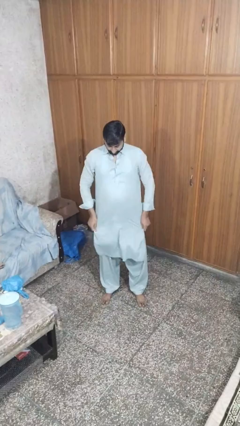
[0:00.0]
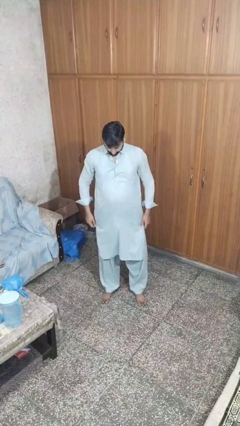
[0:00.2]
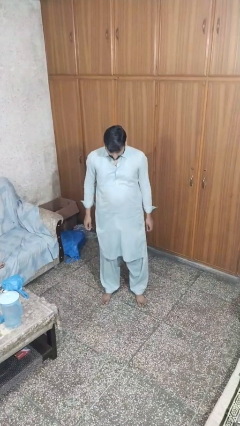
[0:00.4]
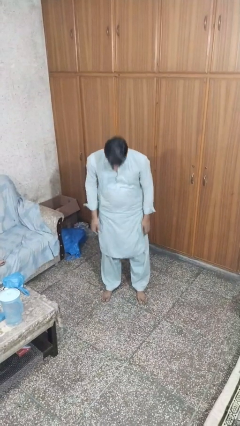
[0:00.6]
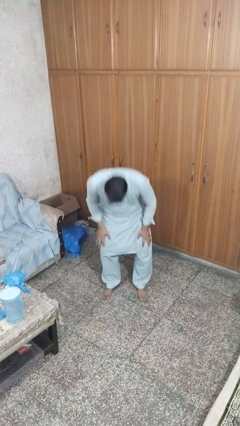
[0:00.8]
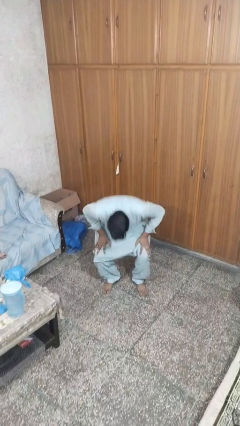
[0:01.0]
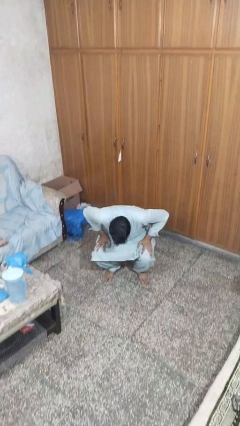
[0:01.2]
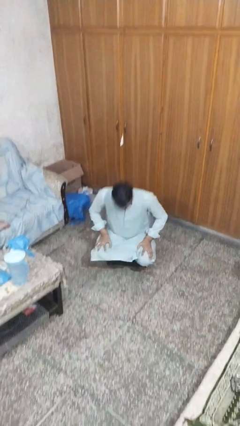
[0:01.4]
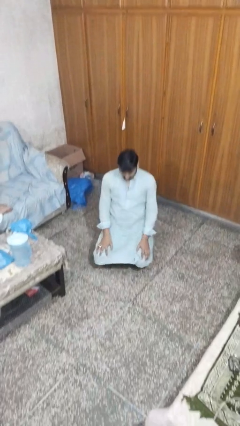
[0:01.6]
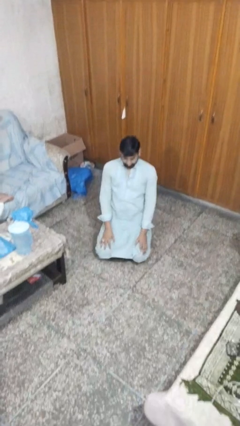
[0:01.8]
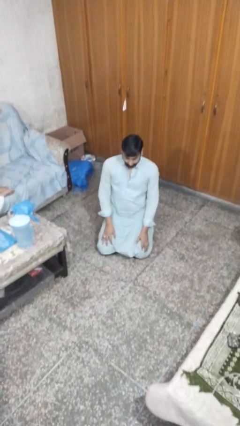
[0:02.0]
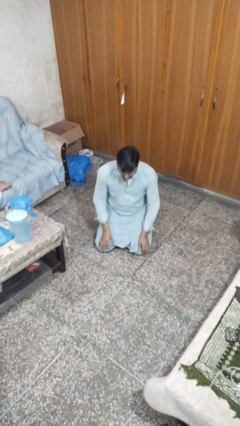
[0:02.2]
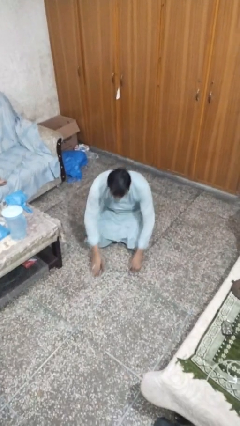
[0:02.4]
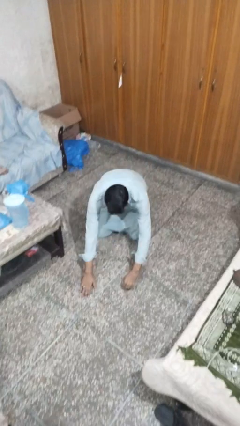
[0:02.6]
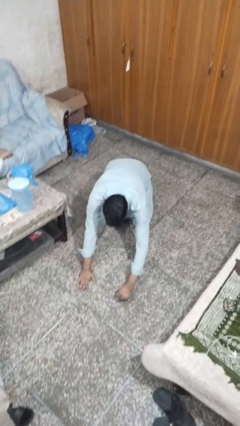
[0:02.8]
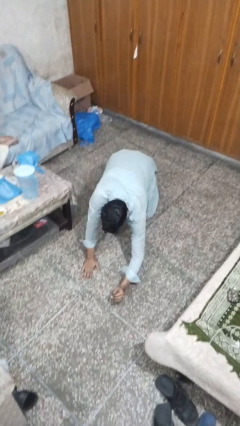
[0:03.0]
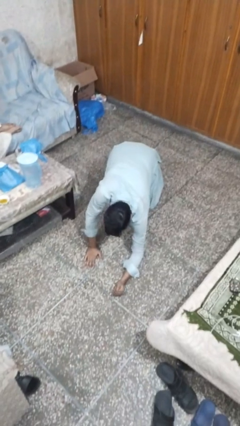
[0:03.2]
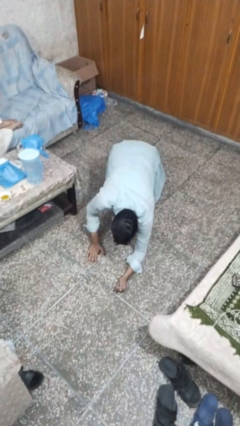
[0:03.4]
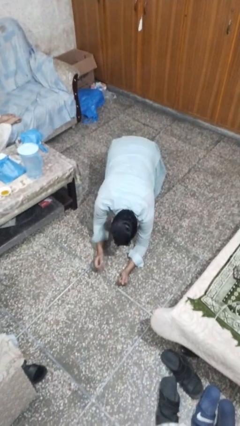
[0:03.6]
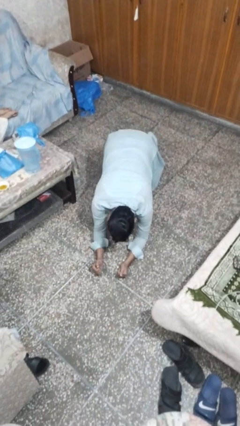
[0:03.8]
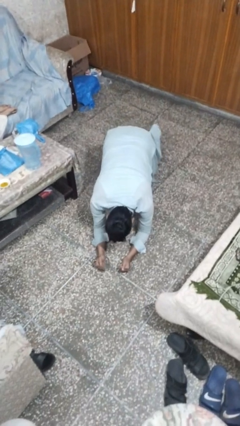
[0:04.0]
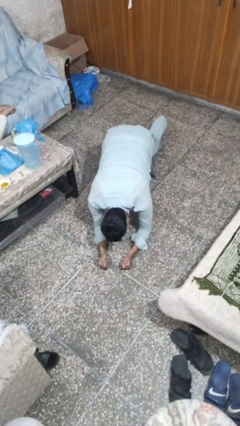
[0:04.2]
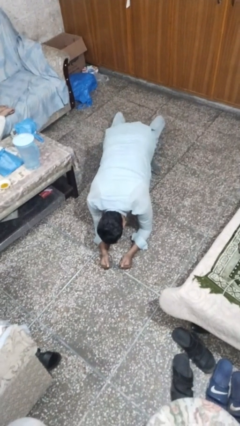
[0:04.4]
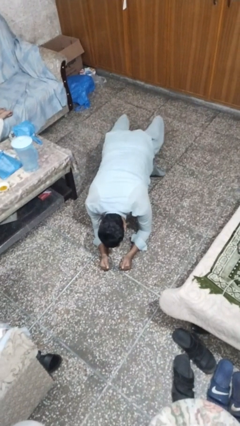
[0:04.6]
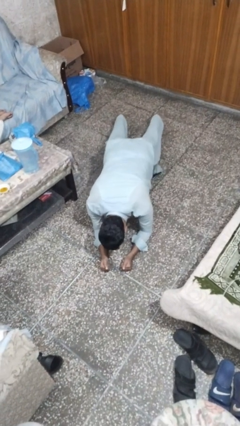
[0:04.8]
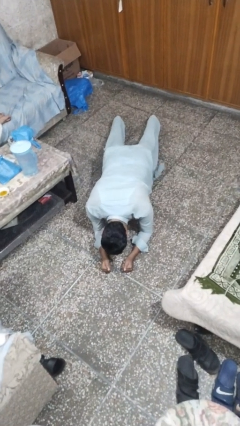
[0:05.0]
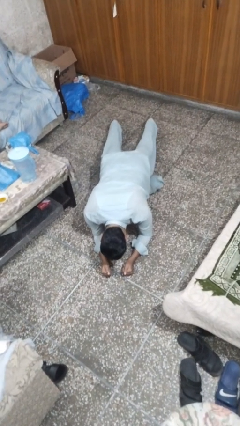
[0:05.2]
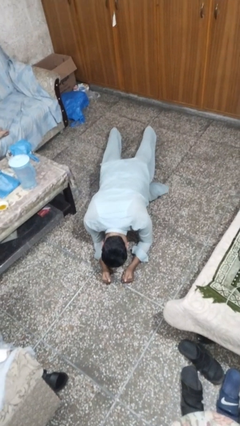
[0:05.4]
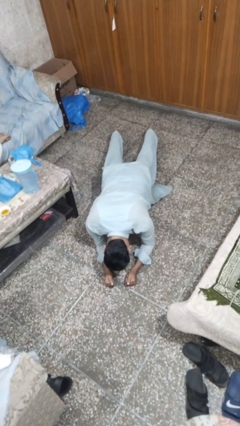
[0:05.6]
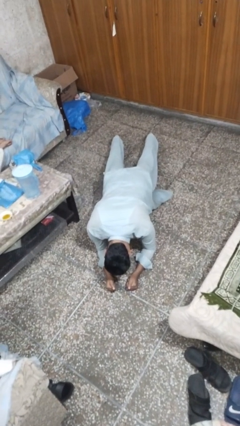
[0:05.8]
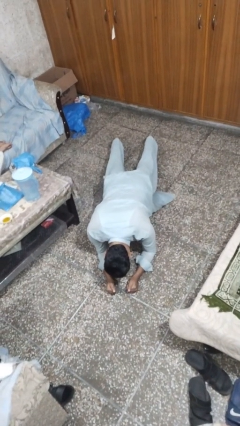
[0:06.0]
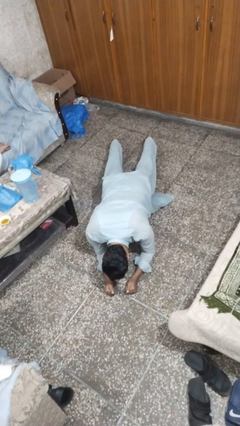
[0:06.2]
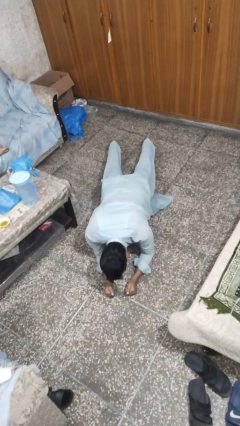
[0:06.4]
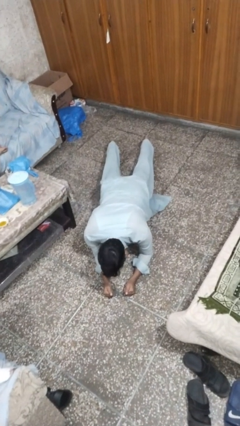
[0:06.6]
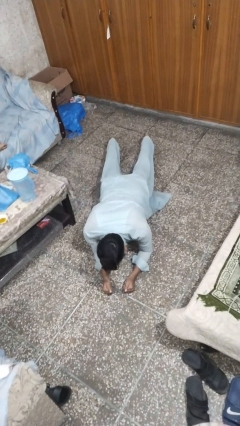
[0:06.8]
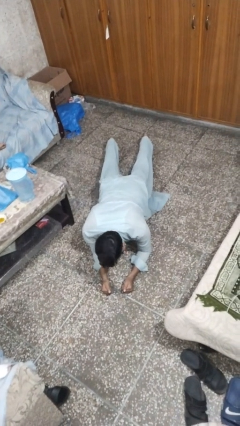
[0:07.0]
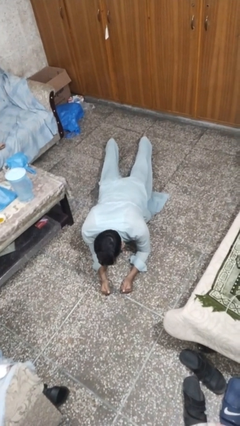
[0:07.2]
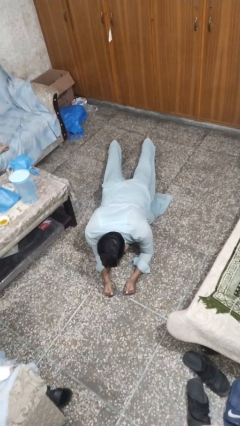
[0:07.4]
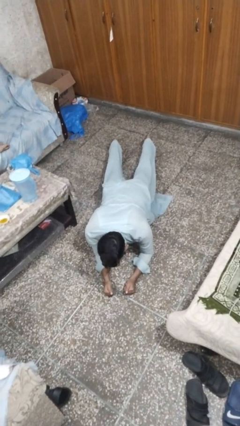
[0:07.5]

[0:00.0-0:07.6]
person exercises with plank

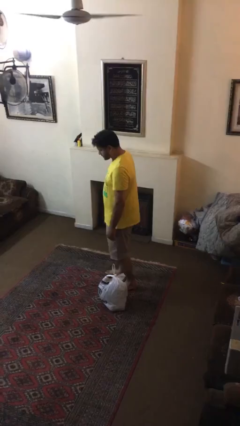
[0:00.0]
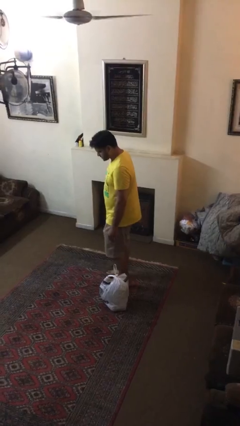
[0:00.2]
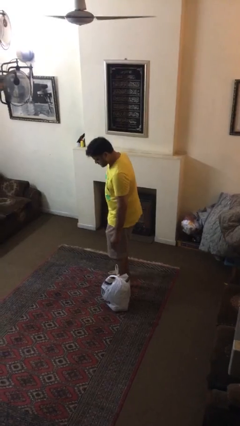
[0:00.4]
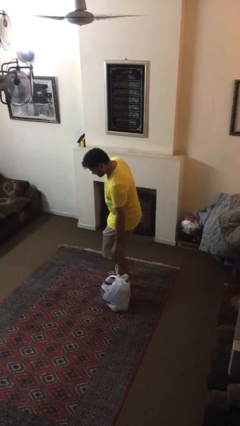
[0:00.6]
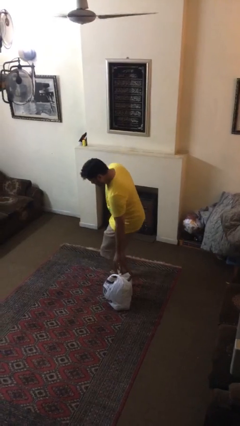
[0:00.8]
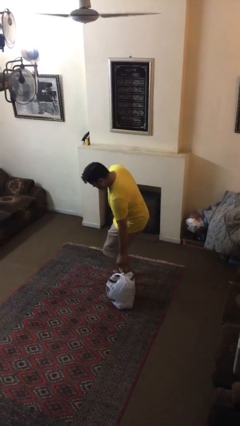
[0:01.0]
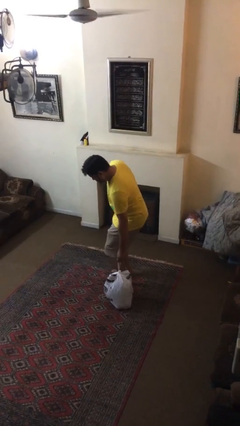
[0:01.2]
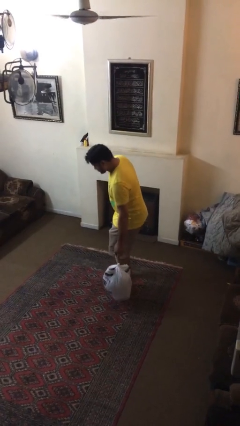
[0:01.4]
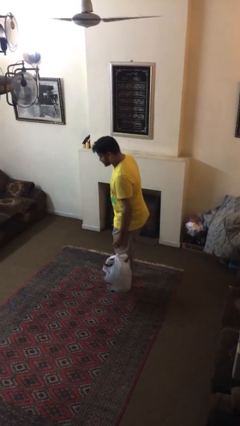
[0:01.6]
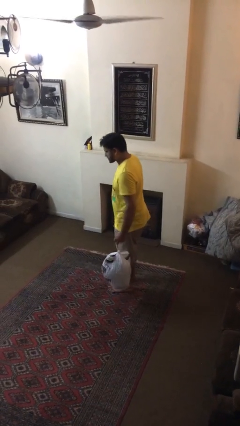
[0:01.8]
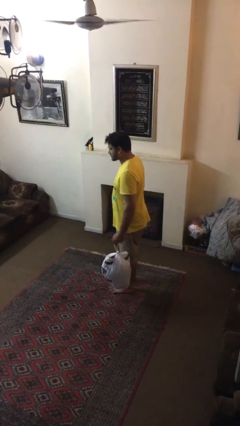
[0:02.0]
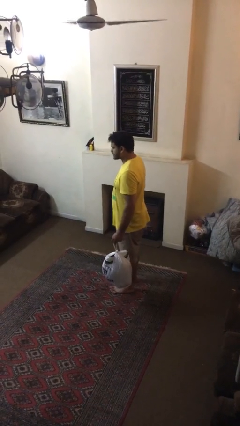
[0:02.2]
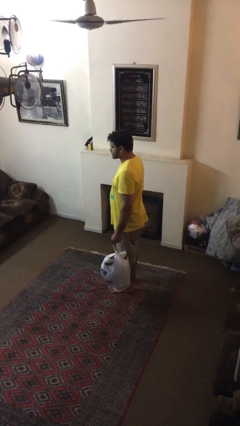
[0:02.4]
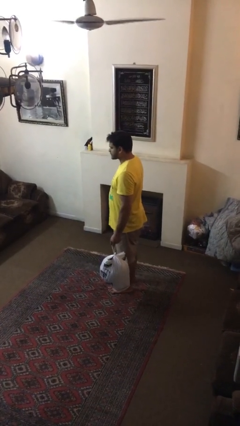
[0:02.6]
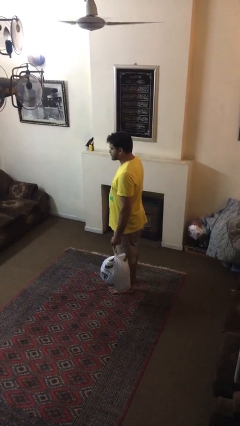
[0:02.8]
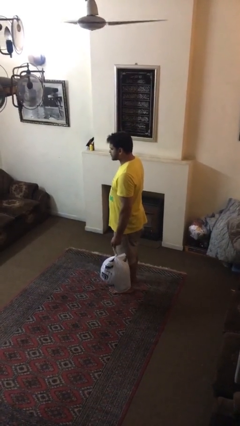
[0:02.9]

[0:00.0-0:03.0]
person picks up object from floor

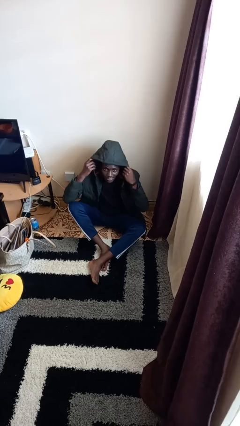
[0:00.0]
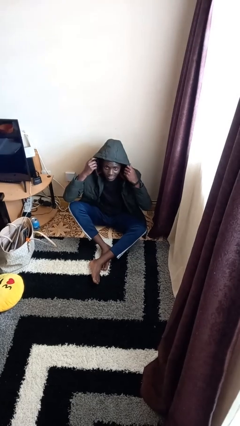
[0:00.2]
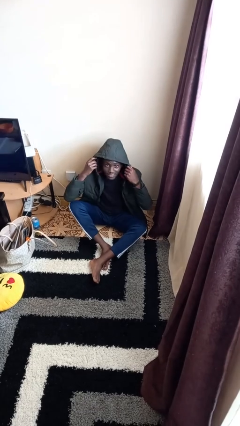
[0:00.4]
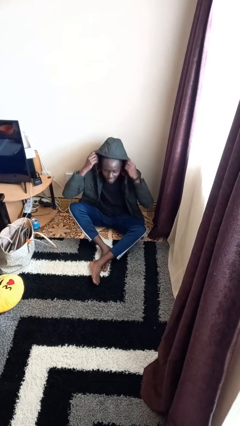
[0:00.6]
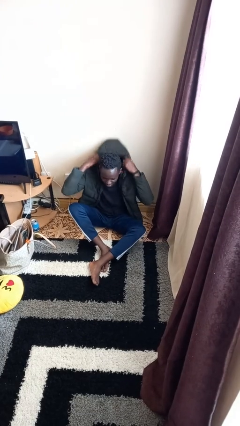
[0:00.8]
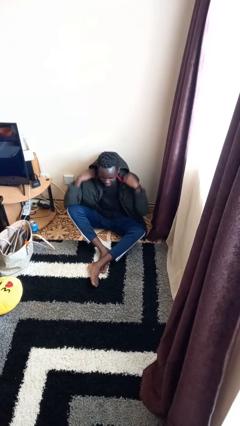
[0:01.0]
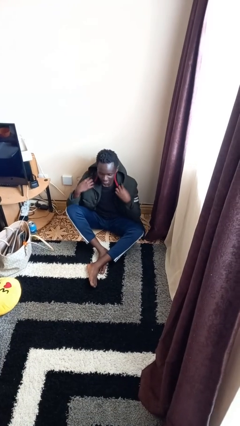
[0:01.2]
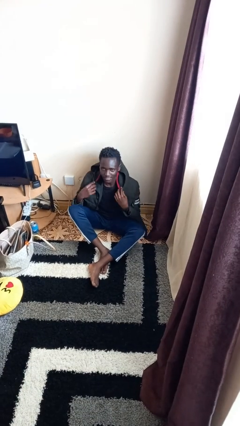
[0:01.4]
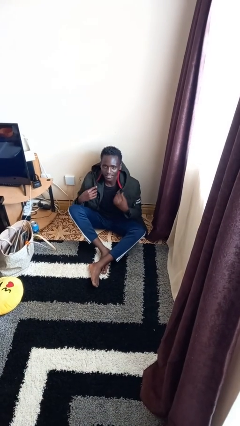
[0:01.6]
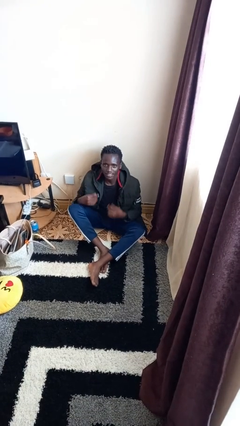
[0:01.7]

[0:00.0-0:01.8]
person takes off hoodie

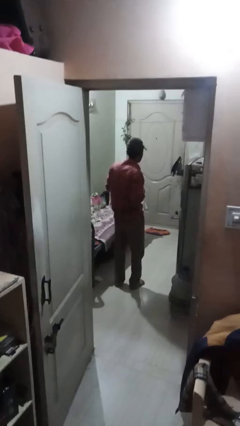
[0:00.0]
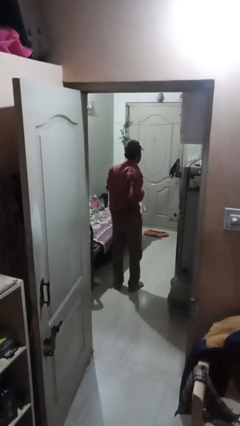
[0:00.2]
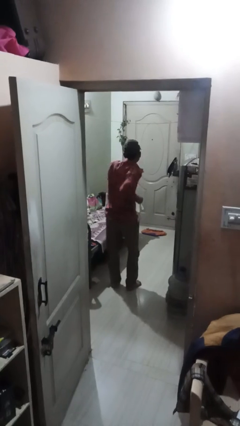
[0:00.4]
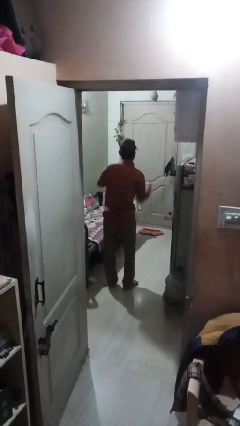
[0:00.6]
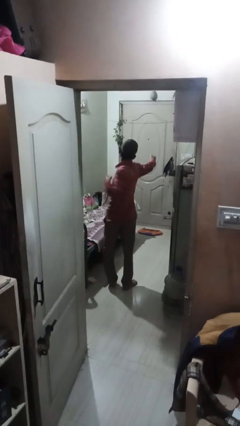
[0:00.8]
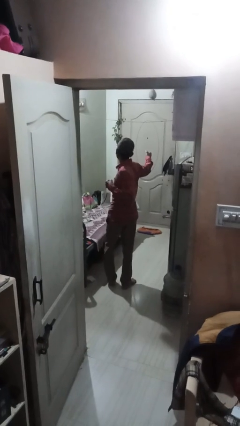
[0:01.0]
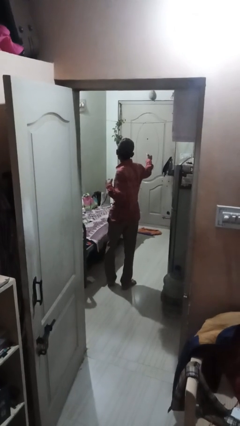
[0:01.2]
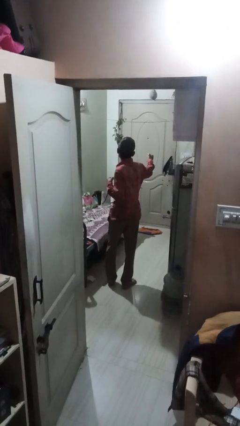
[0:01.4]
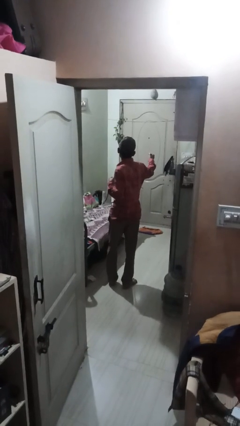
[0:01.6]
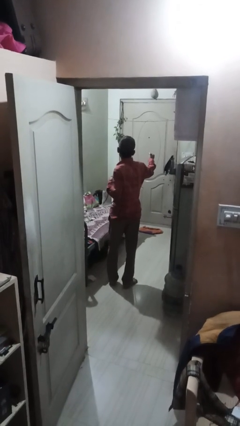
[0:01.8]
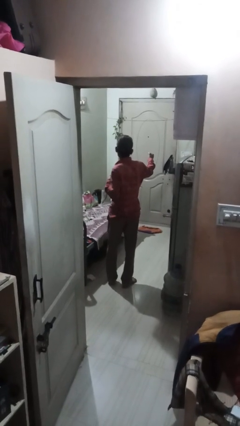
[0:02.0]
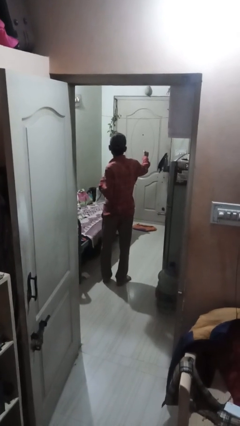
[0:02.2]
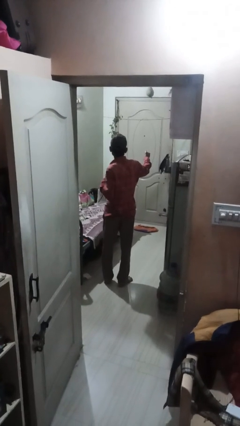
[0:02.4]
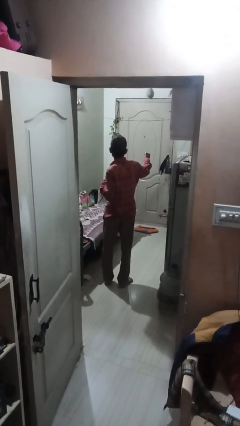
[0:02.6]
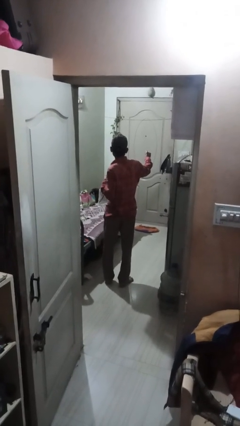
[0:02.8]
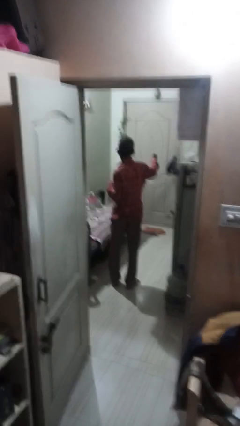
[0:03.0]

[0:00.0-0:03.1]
person punches

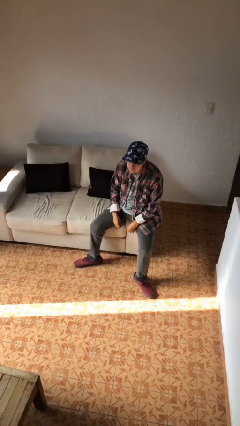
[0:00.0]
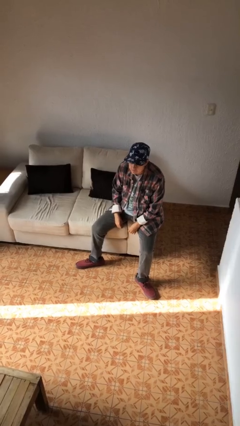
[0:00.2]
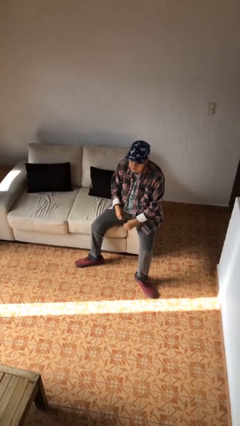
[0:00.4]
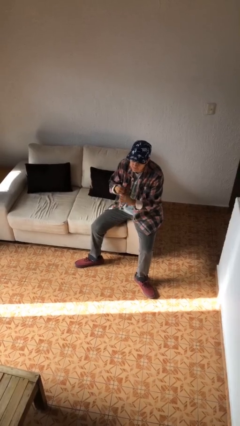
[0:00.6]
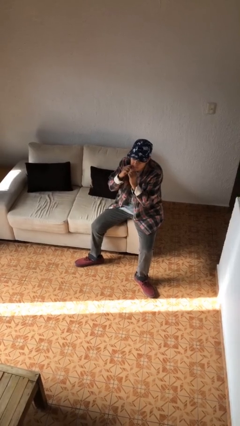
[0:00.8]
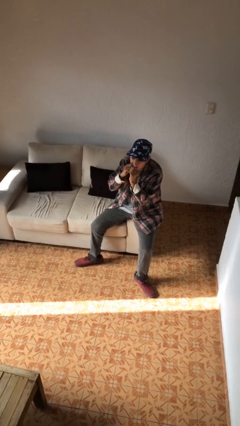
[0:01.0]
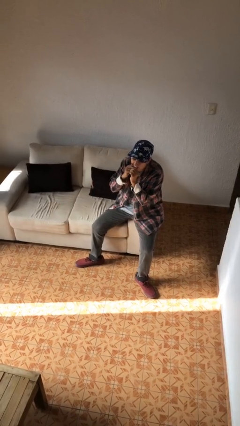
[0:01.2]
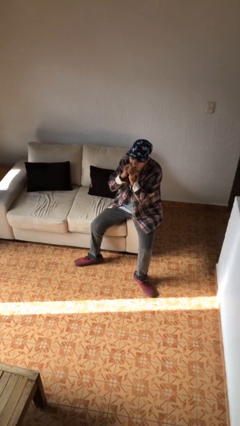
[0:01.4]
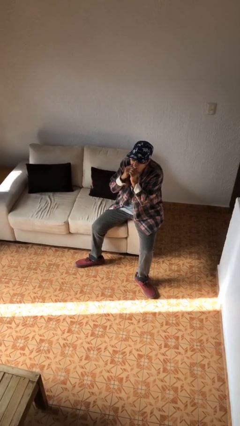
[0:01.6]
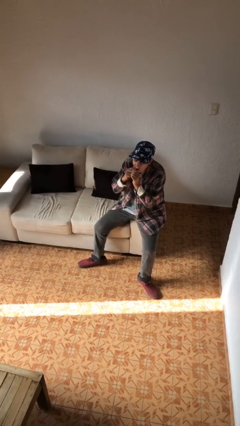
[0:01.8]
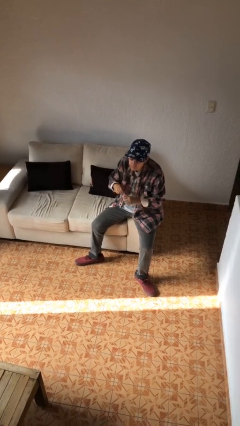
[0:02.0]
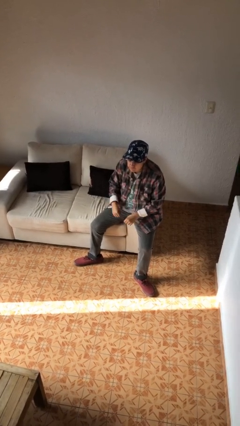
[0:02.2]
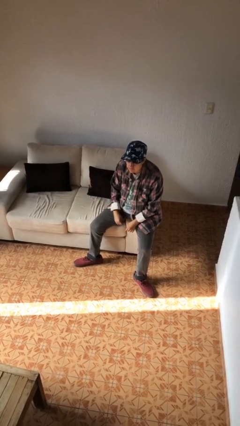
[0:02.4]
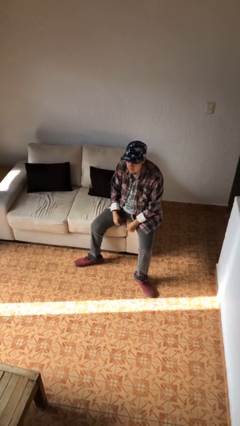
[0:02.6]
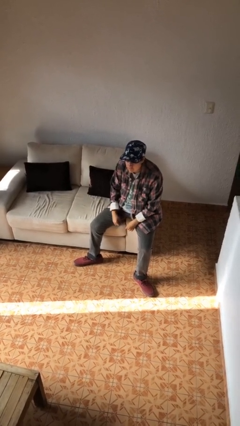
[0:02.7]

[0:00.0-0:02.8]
person flosses
